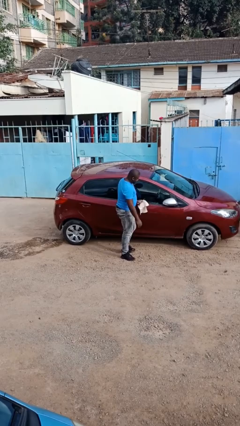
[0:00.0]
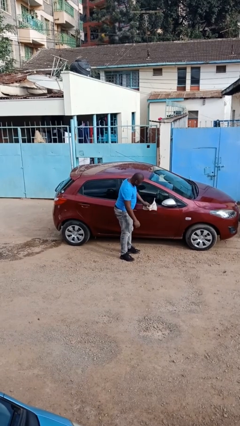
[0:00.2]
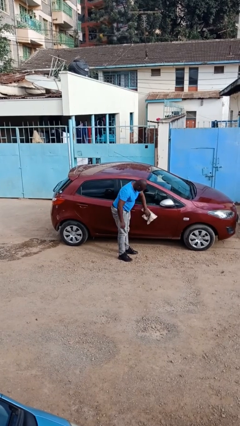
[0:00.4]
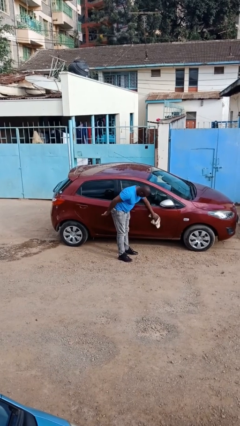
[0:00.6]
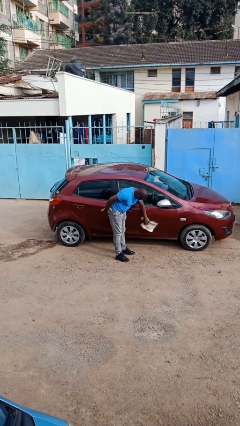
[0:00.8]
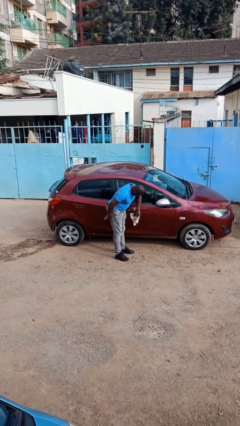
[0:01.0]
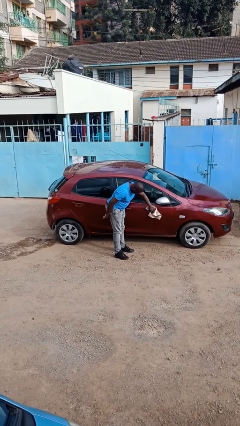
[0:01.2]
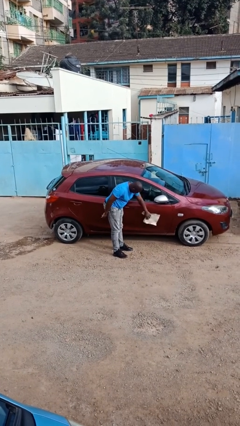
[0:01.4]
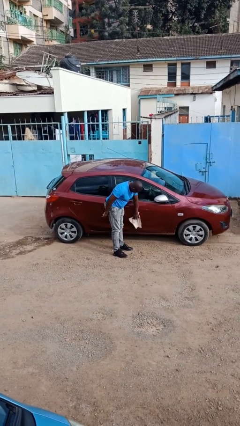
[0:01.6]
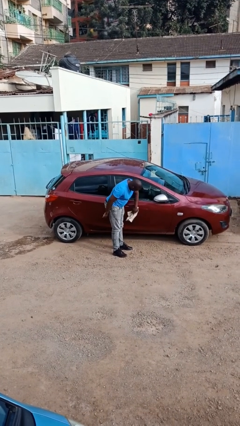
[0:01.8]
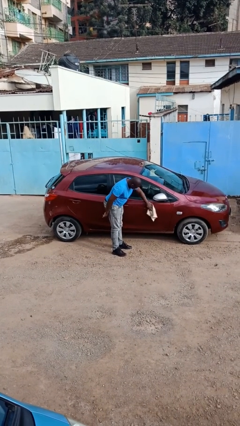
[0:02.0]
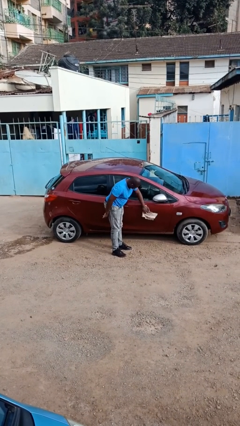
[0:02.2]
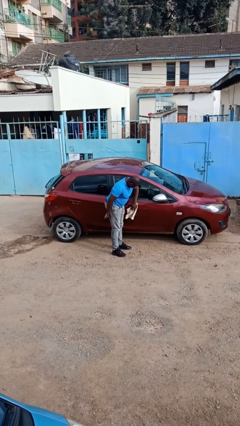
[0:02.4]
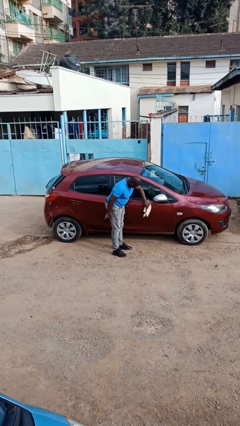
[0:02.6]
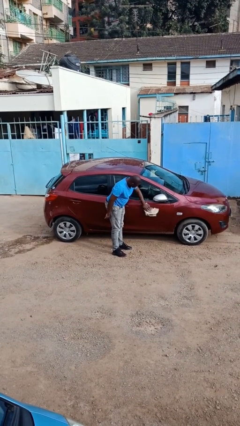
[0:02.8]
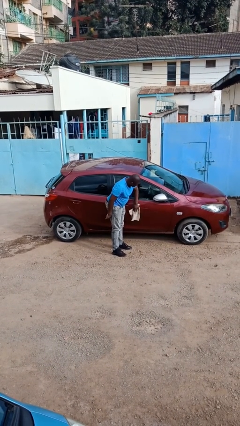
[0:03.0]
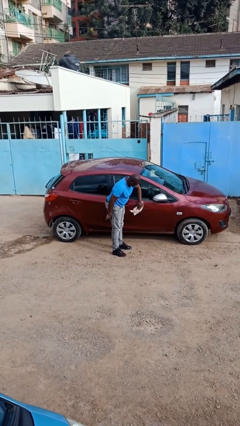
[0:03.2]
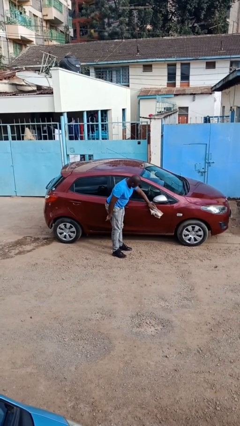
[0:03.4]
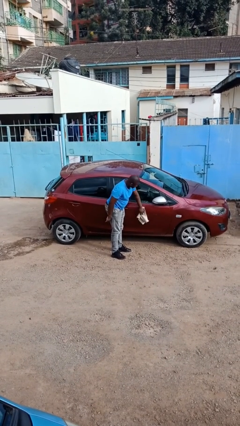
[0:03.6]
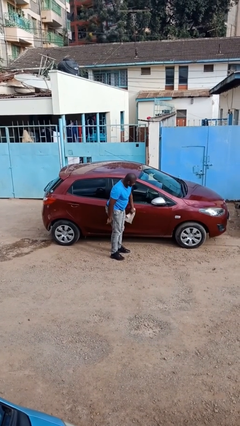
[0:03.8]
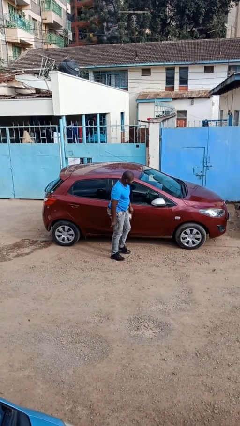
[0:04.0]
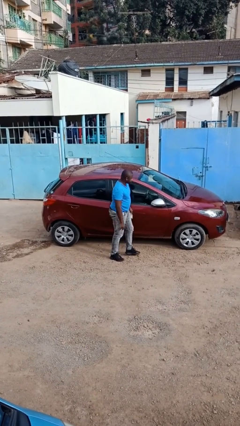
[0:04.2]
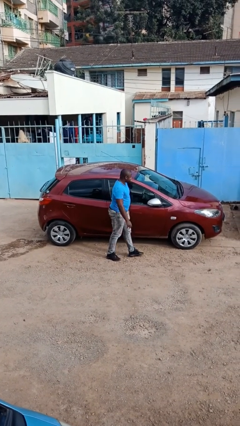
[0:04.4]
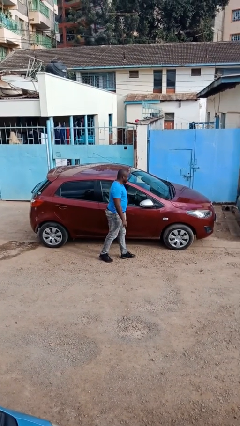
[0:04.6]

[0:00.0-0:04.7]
person polishes car with rag

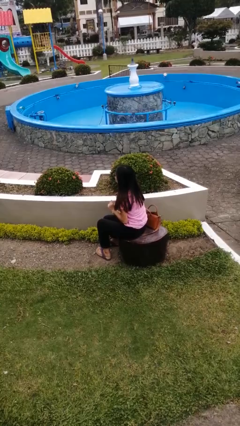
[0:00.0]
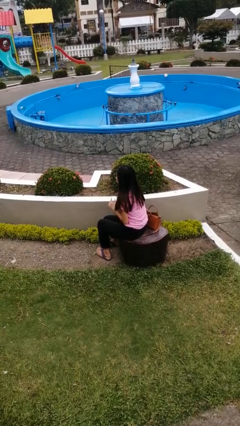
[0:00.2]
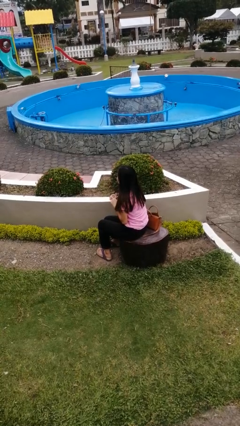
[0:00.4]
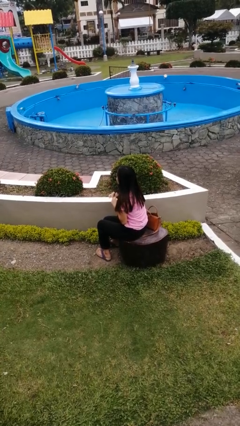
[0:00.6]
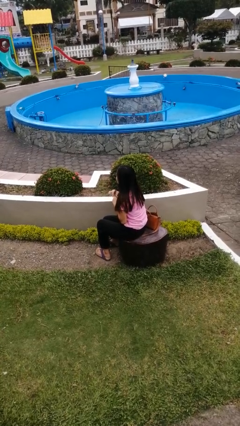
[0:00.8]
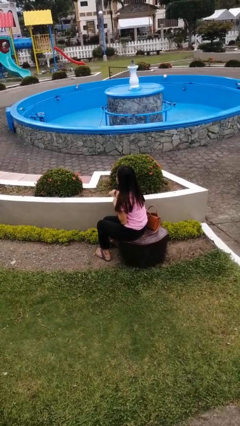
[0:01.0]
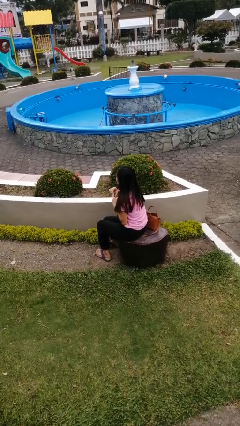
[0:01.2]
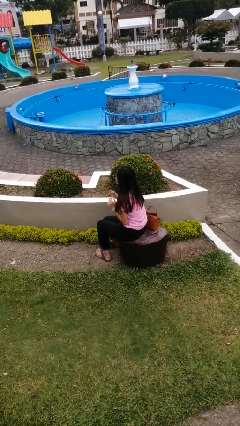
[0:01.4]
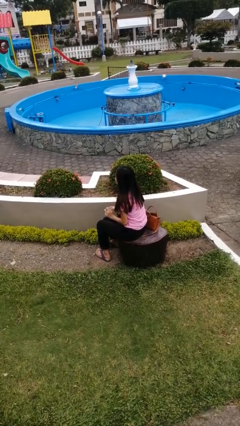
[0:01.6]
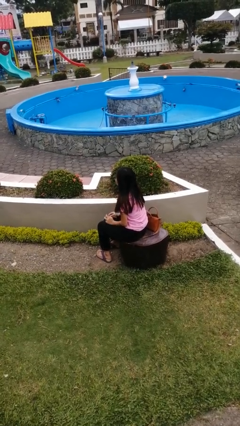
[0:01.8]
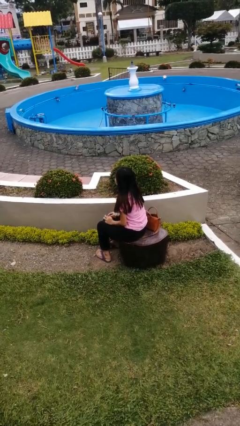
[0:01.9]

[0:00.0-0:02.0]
person takes off ring

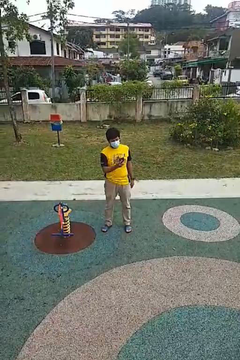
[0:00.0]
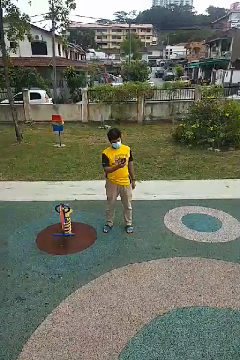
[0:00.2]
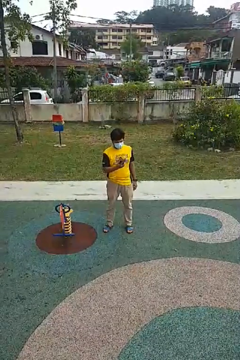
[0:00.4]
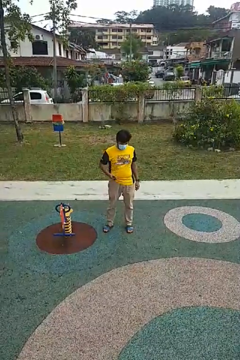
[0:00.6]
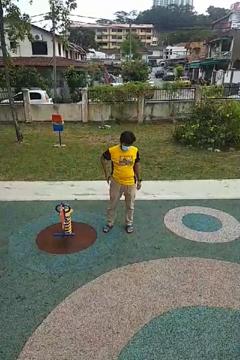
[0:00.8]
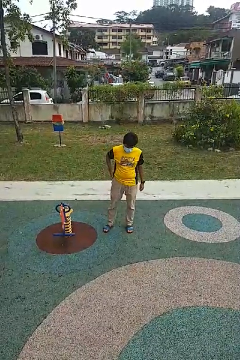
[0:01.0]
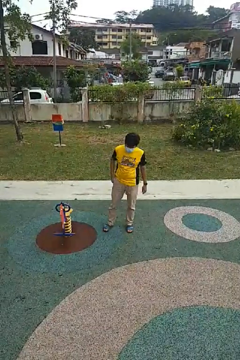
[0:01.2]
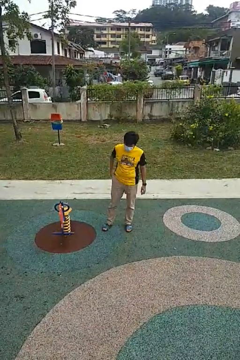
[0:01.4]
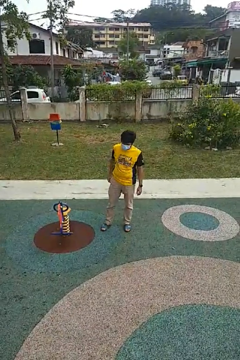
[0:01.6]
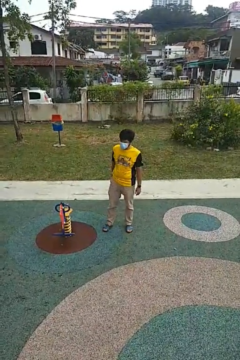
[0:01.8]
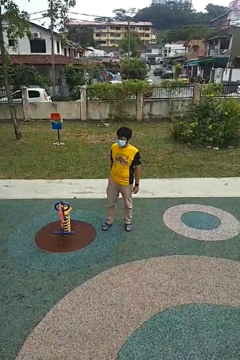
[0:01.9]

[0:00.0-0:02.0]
person puts phone into pocket

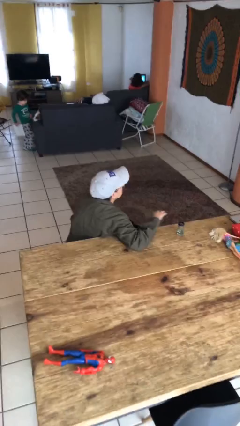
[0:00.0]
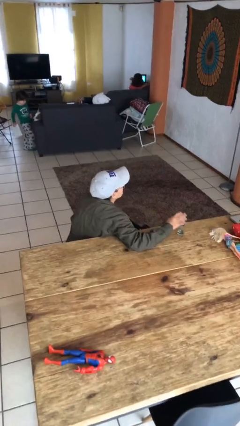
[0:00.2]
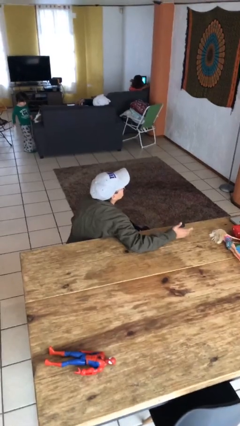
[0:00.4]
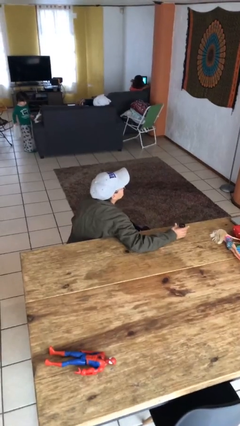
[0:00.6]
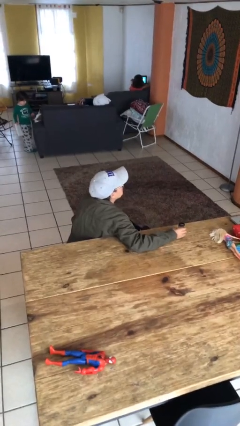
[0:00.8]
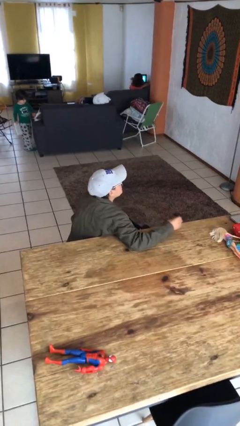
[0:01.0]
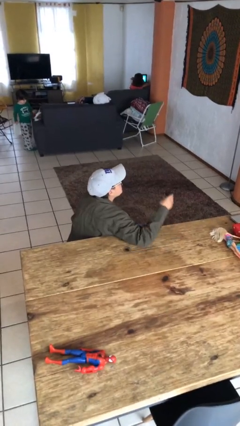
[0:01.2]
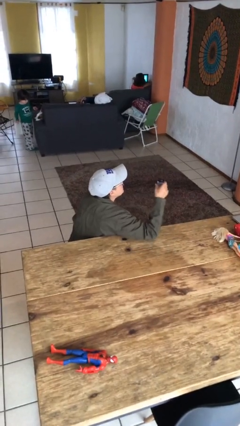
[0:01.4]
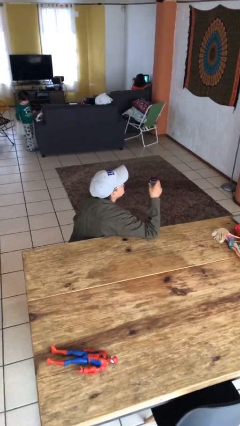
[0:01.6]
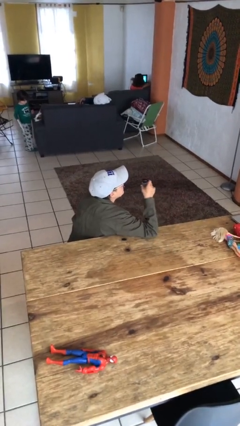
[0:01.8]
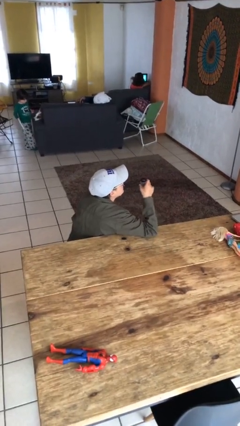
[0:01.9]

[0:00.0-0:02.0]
person picks up object from table

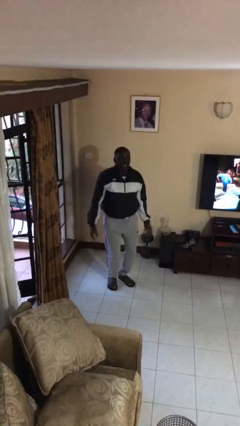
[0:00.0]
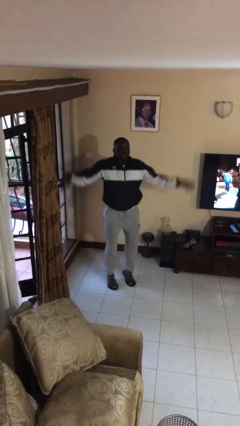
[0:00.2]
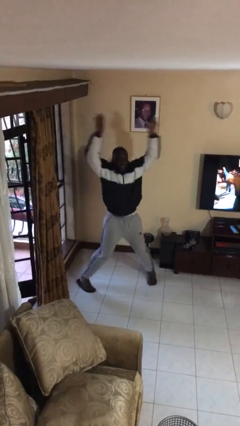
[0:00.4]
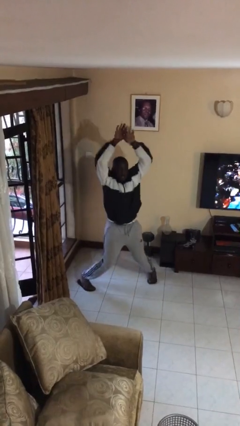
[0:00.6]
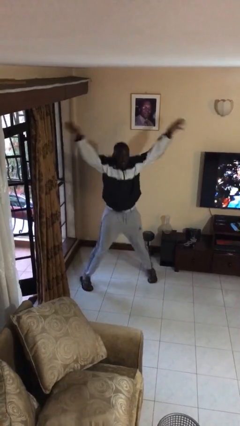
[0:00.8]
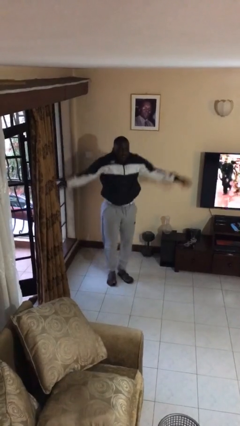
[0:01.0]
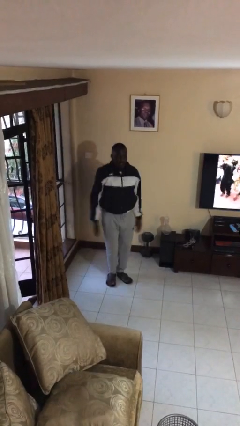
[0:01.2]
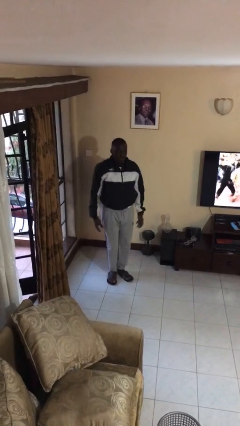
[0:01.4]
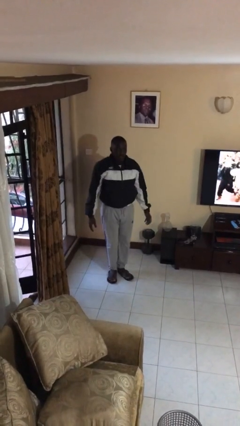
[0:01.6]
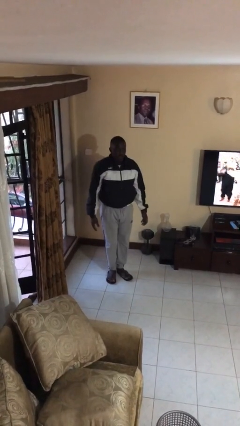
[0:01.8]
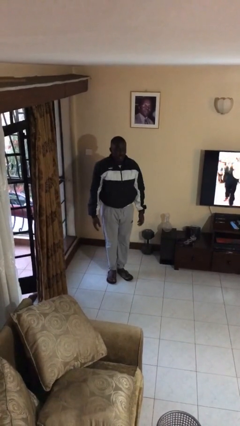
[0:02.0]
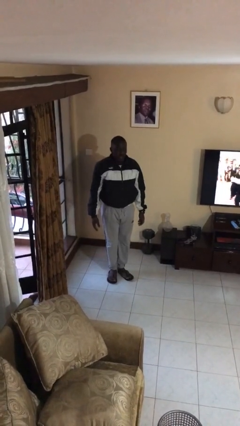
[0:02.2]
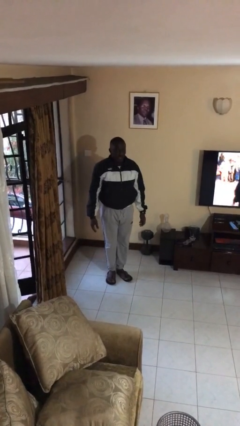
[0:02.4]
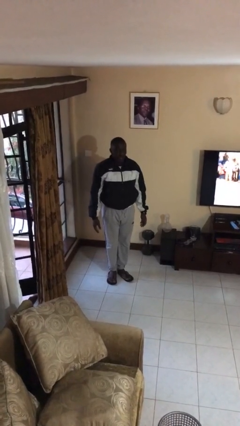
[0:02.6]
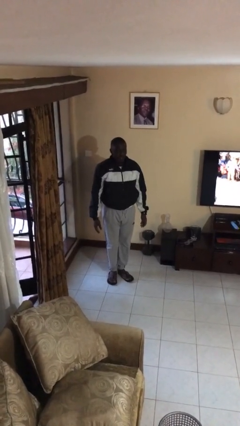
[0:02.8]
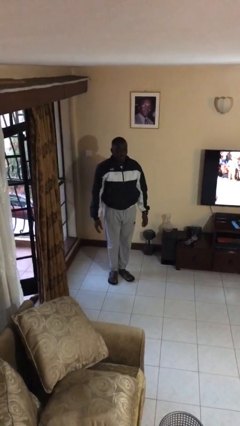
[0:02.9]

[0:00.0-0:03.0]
person exercises with jumping jacks

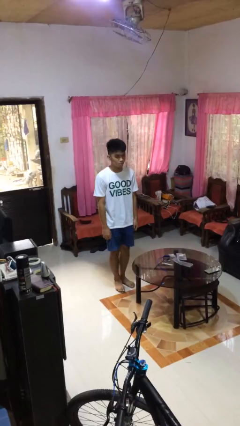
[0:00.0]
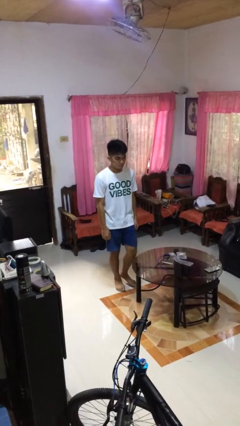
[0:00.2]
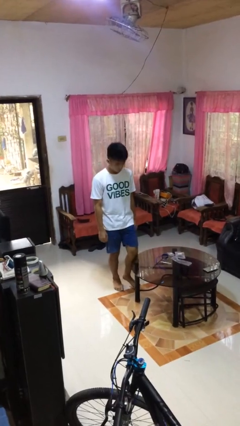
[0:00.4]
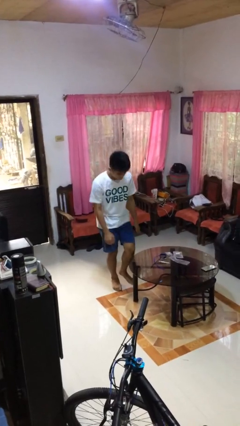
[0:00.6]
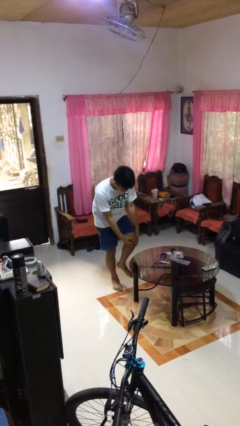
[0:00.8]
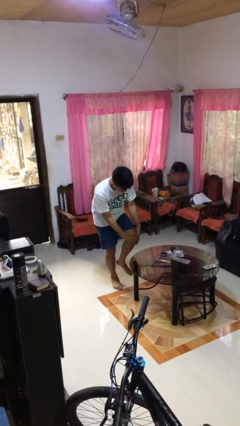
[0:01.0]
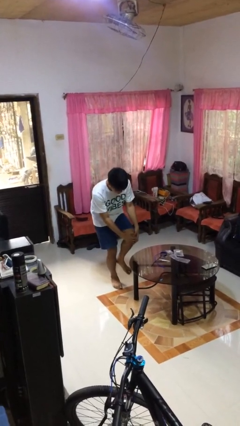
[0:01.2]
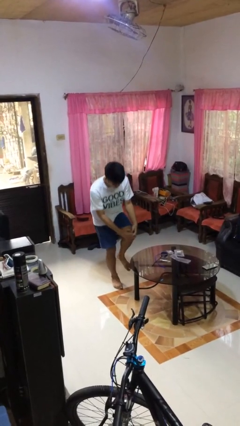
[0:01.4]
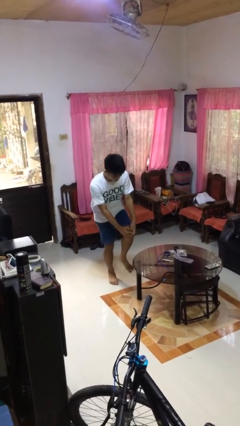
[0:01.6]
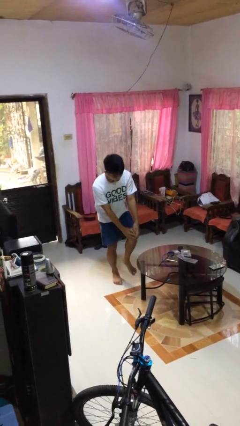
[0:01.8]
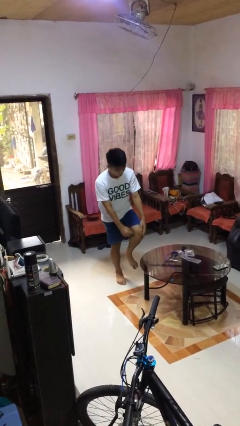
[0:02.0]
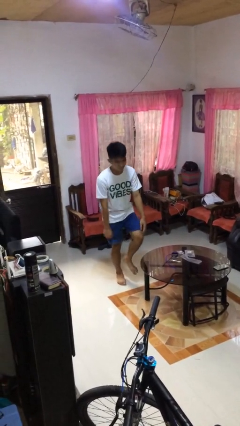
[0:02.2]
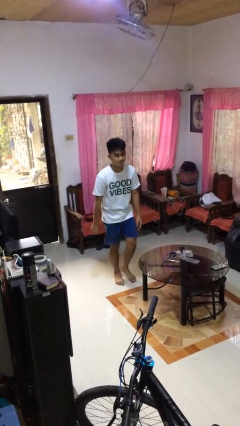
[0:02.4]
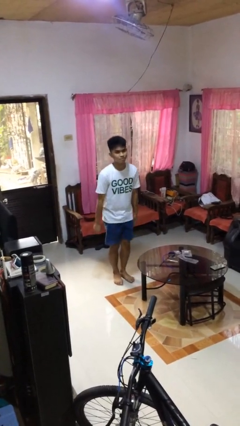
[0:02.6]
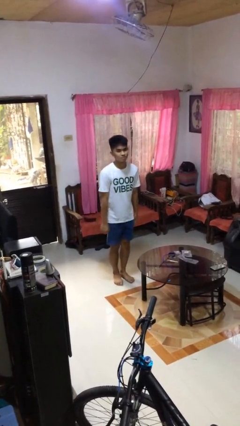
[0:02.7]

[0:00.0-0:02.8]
person bumps into table

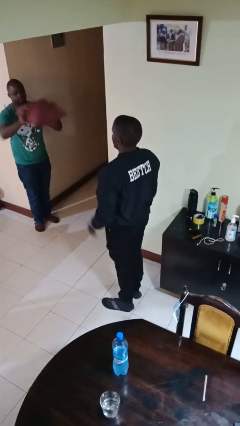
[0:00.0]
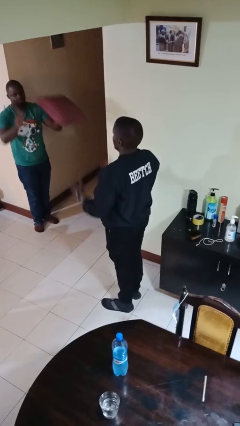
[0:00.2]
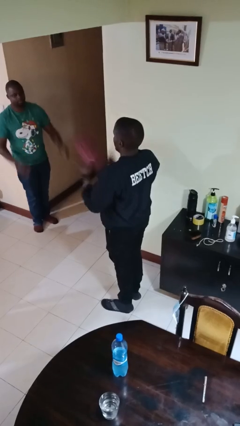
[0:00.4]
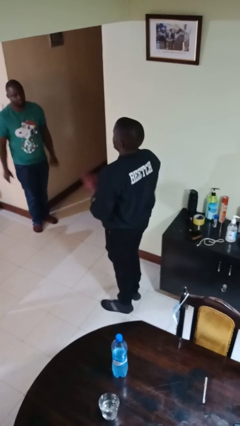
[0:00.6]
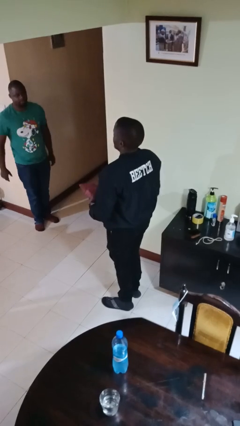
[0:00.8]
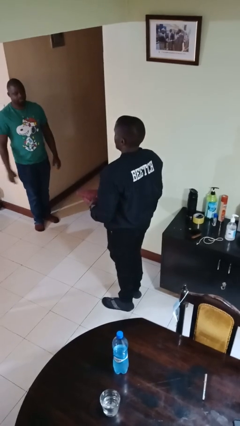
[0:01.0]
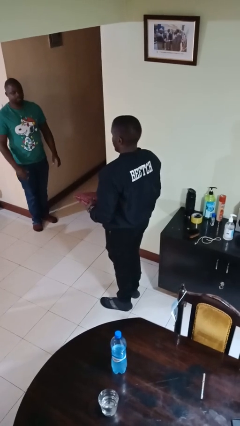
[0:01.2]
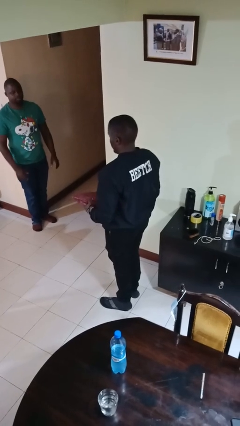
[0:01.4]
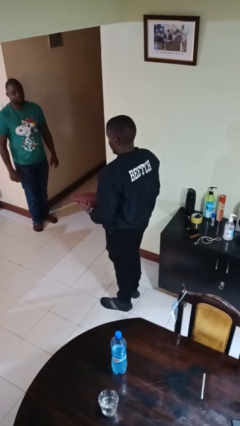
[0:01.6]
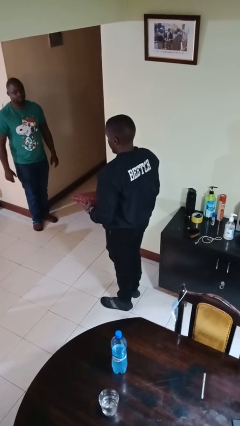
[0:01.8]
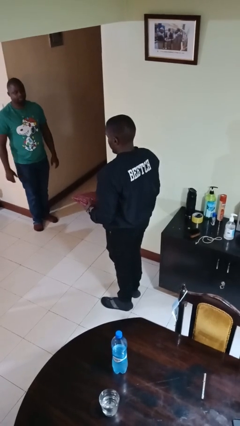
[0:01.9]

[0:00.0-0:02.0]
person catches object from person
